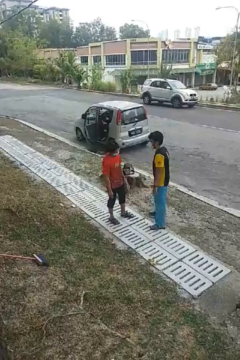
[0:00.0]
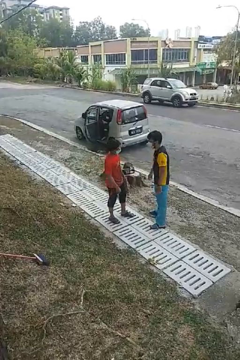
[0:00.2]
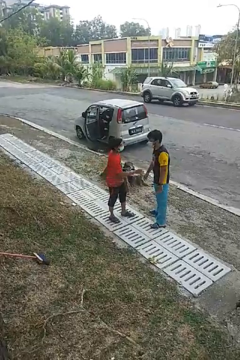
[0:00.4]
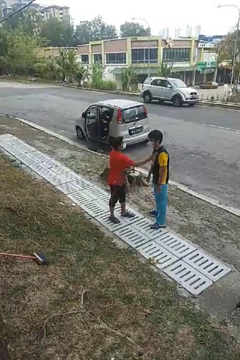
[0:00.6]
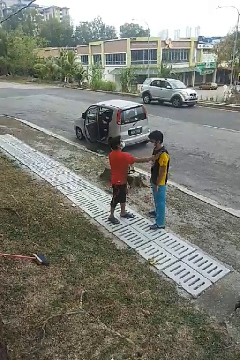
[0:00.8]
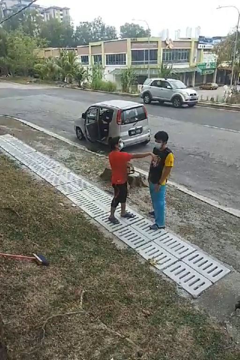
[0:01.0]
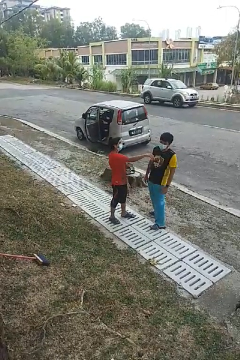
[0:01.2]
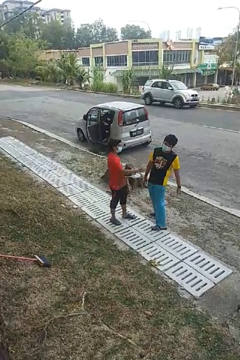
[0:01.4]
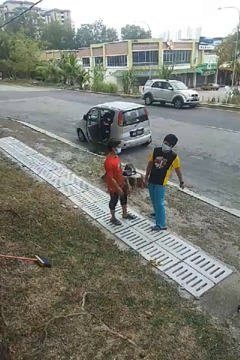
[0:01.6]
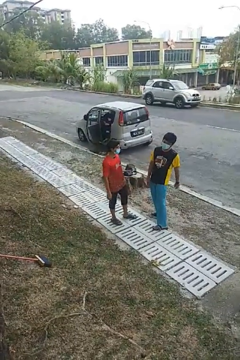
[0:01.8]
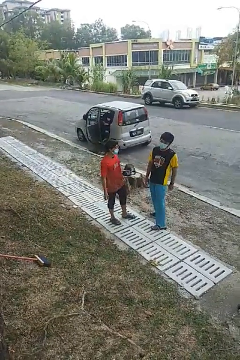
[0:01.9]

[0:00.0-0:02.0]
person shoves person

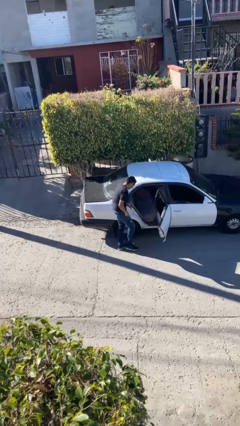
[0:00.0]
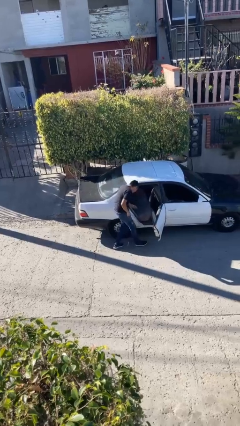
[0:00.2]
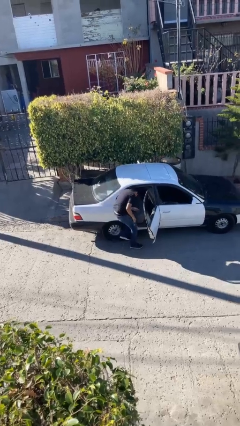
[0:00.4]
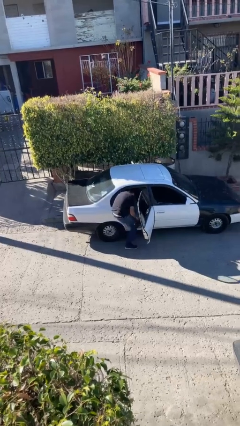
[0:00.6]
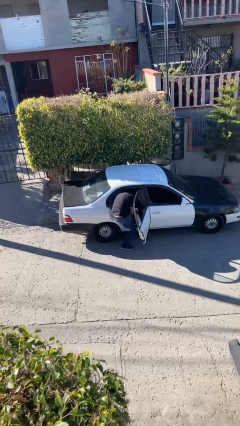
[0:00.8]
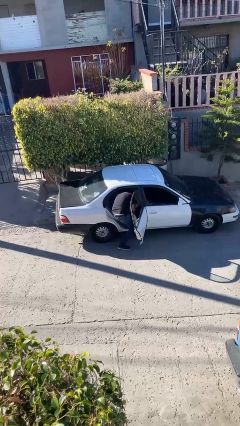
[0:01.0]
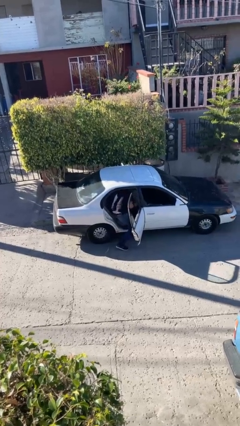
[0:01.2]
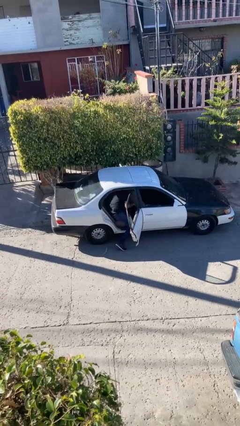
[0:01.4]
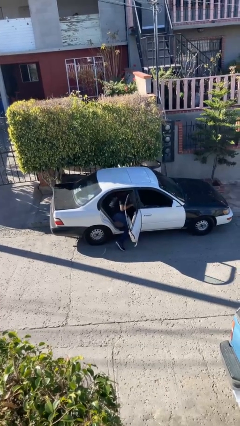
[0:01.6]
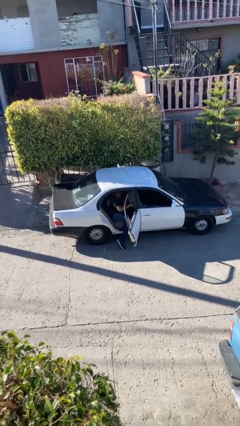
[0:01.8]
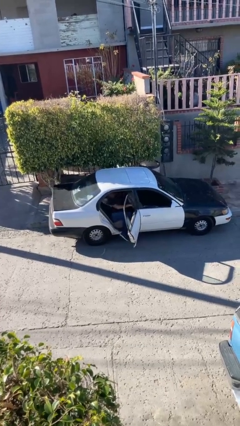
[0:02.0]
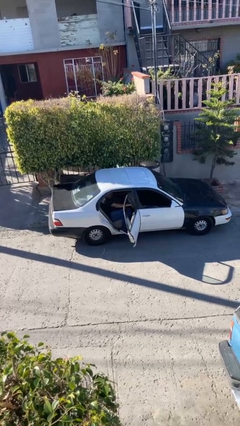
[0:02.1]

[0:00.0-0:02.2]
person enters car

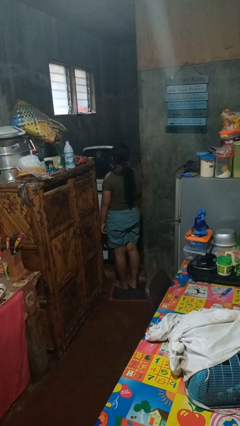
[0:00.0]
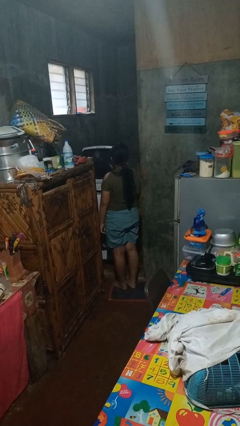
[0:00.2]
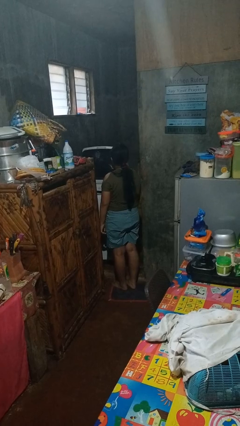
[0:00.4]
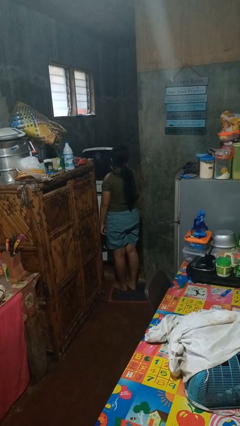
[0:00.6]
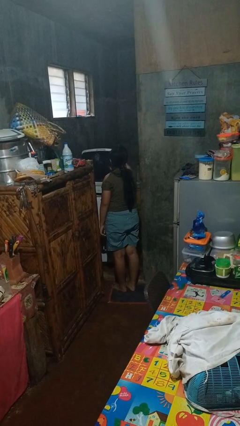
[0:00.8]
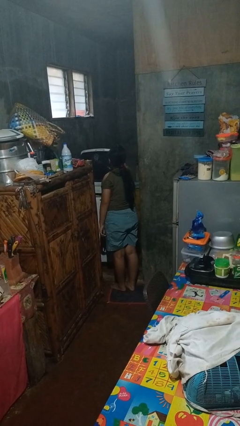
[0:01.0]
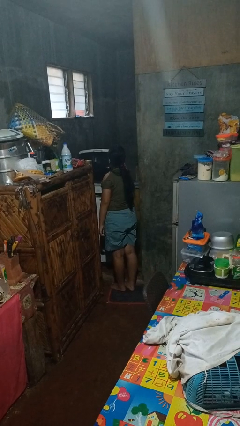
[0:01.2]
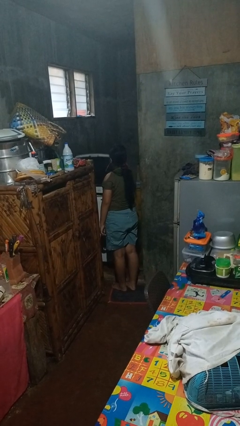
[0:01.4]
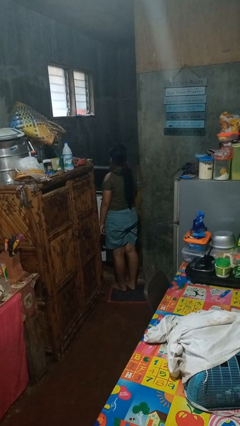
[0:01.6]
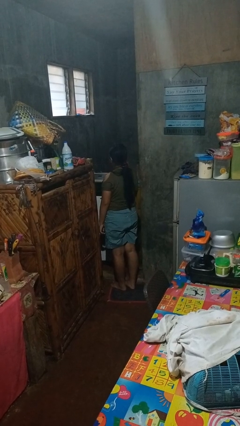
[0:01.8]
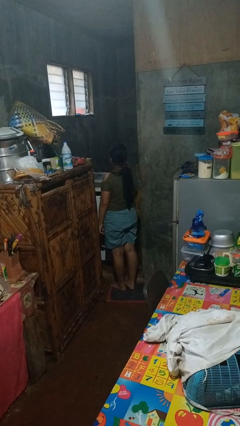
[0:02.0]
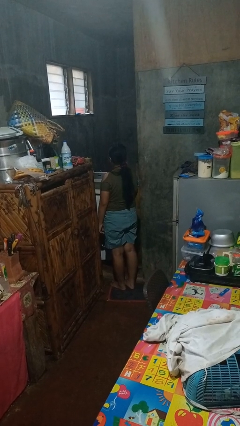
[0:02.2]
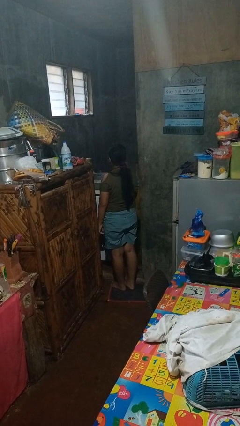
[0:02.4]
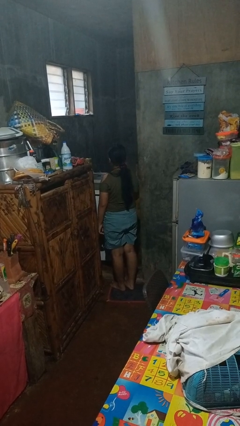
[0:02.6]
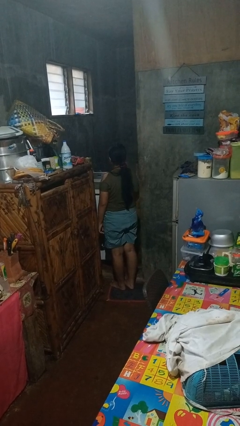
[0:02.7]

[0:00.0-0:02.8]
person closes clothes washer

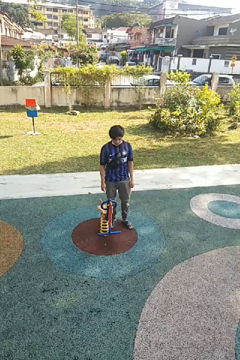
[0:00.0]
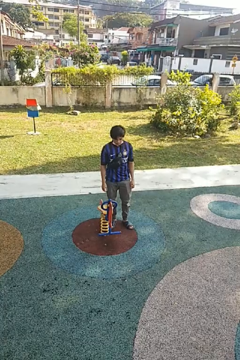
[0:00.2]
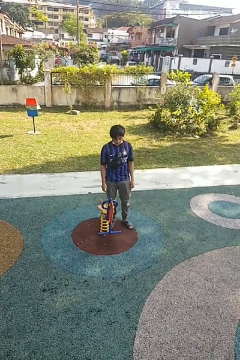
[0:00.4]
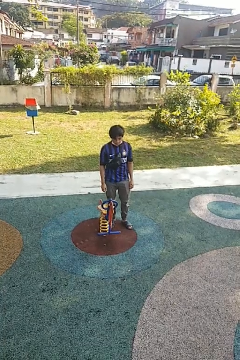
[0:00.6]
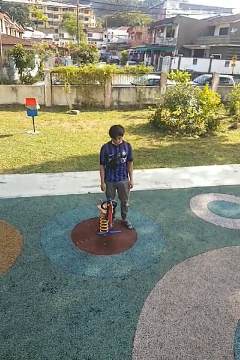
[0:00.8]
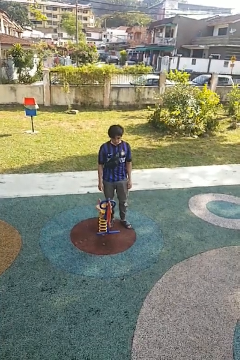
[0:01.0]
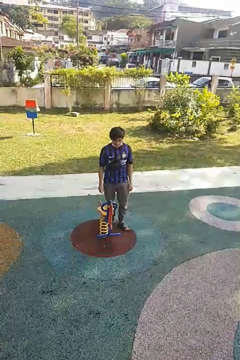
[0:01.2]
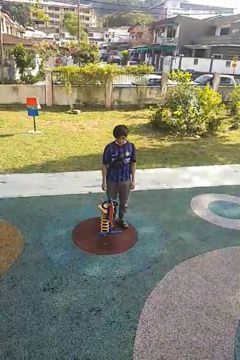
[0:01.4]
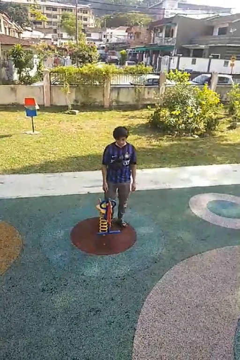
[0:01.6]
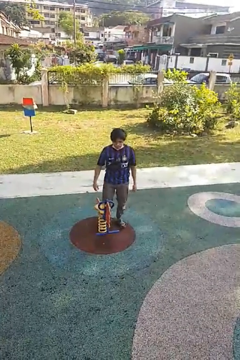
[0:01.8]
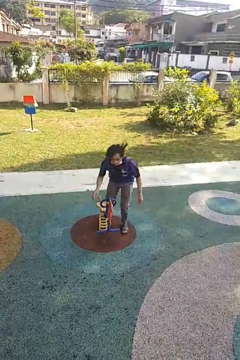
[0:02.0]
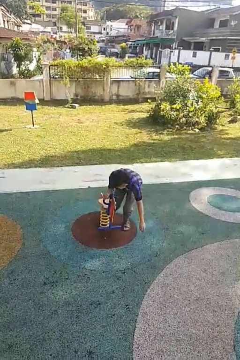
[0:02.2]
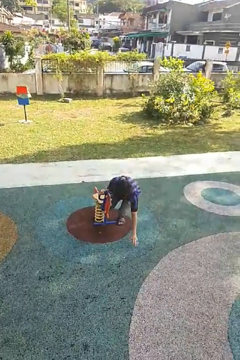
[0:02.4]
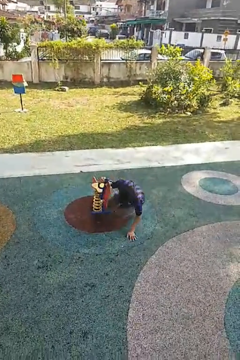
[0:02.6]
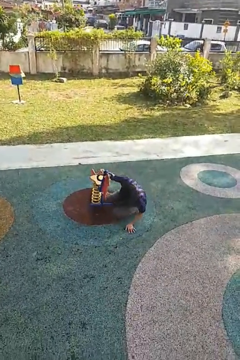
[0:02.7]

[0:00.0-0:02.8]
person trips on object on floor

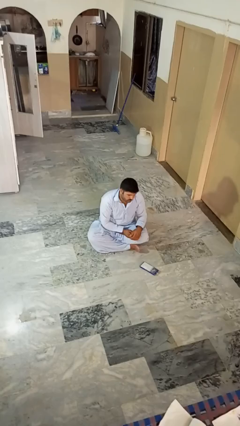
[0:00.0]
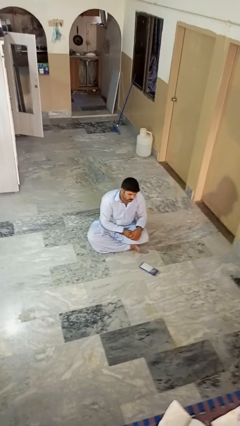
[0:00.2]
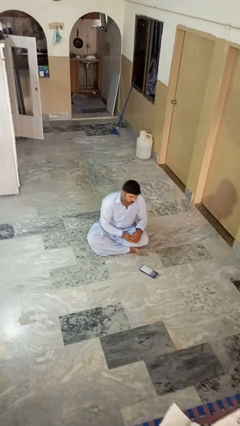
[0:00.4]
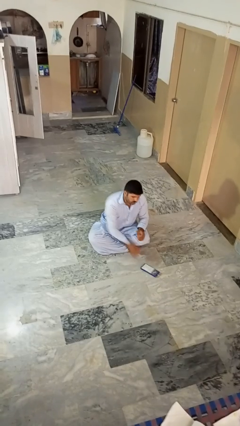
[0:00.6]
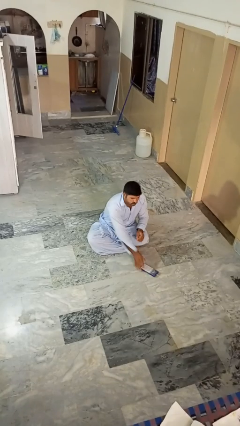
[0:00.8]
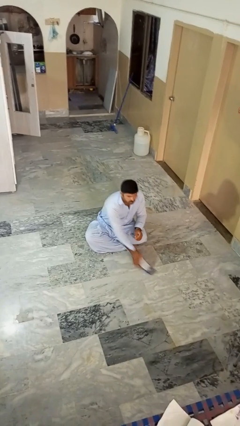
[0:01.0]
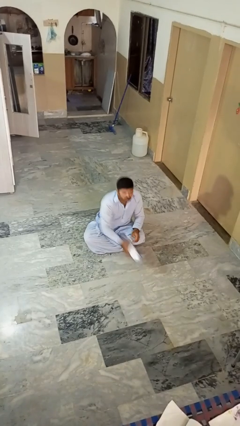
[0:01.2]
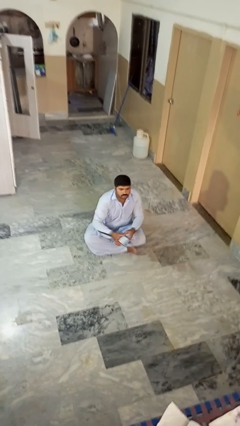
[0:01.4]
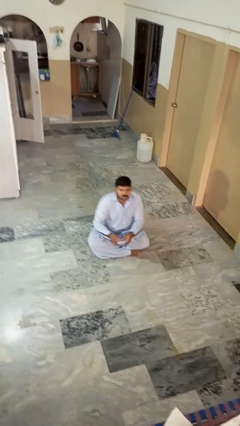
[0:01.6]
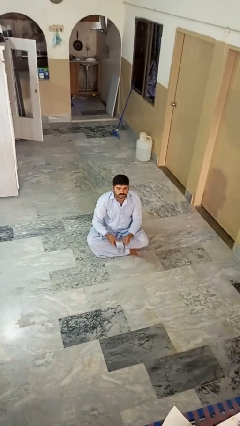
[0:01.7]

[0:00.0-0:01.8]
person picks up object from floor

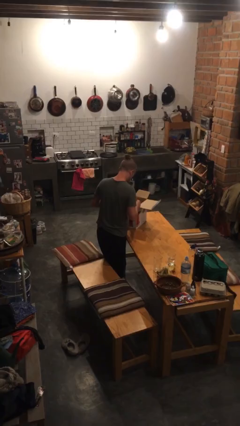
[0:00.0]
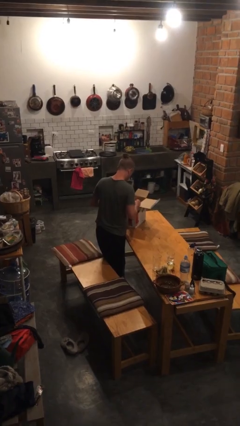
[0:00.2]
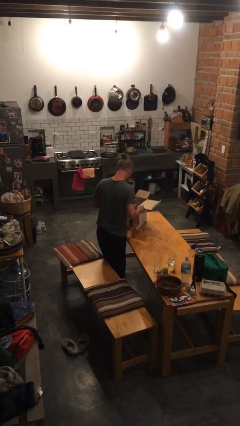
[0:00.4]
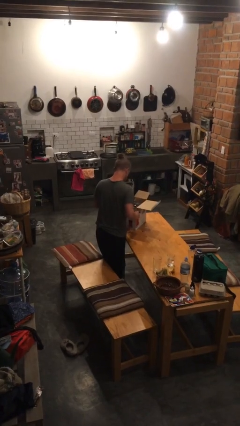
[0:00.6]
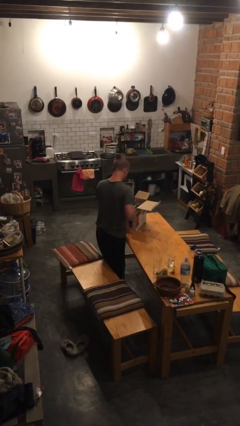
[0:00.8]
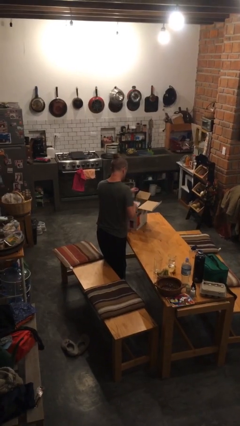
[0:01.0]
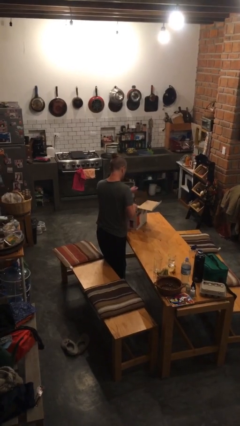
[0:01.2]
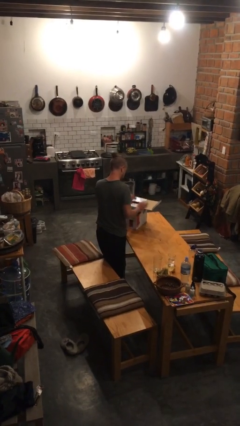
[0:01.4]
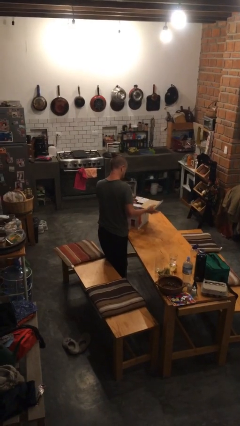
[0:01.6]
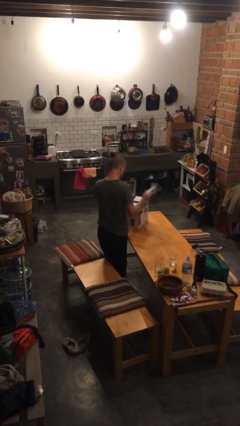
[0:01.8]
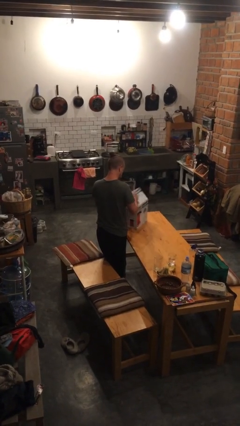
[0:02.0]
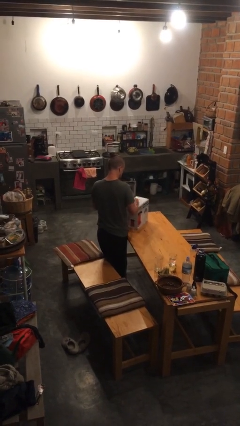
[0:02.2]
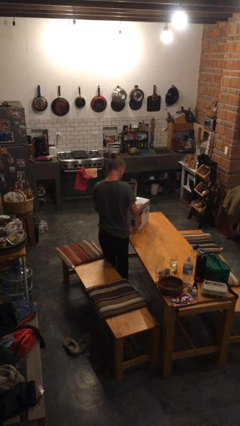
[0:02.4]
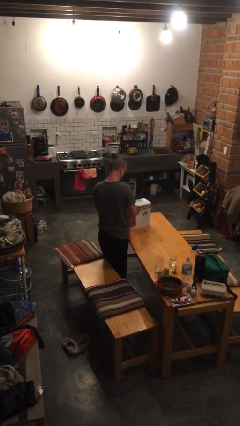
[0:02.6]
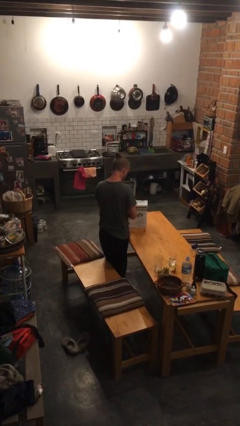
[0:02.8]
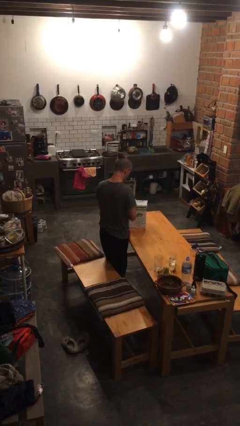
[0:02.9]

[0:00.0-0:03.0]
person closes box

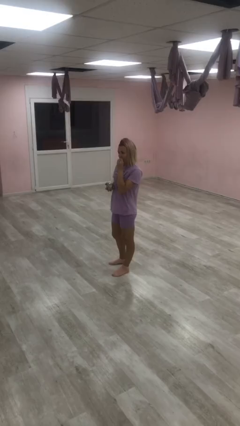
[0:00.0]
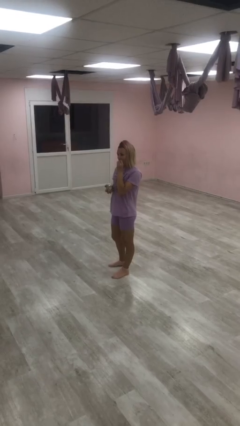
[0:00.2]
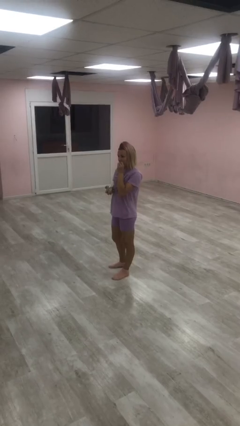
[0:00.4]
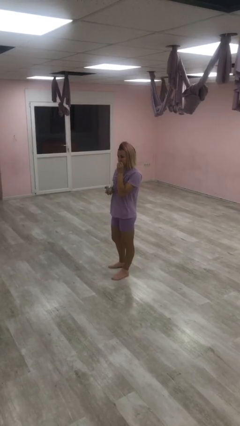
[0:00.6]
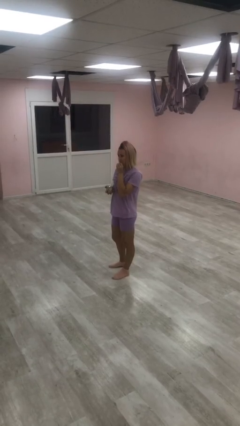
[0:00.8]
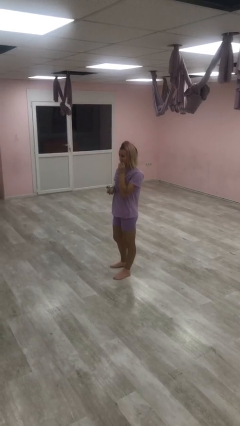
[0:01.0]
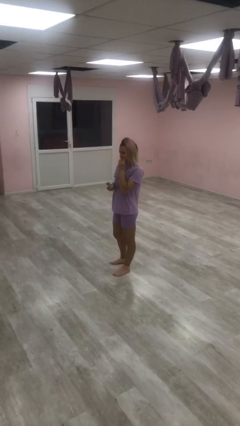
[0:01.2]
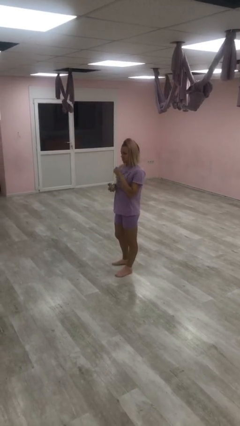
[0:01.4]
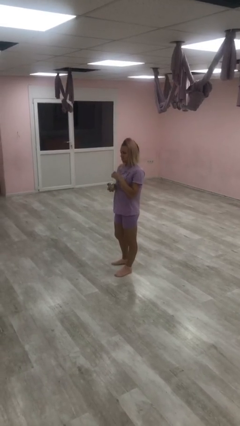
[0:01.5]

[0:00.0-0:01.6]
person eats snack from bag

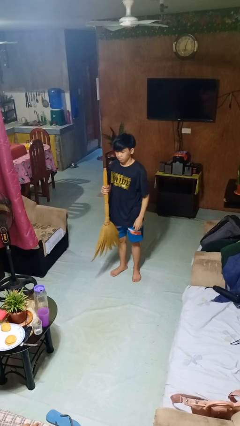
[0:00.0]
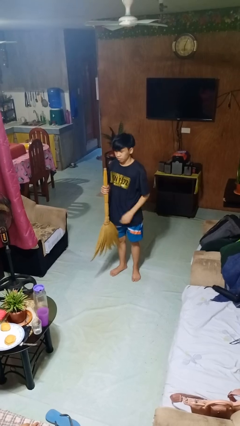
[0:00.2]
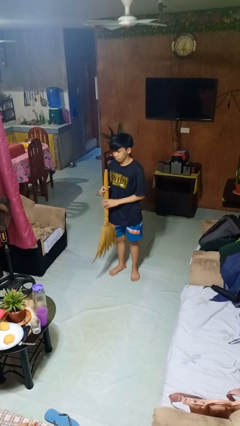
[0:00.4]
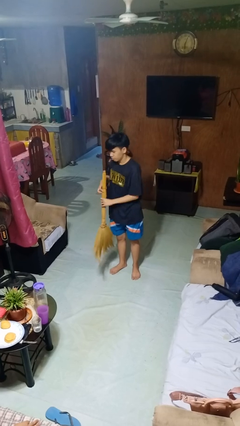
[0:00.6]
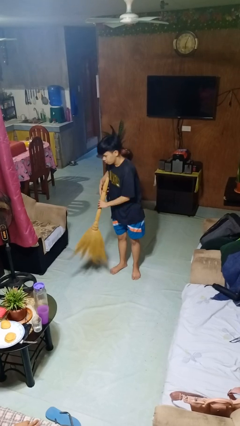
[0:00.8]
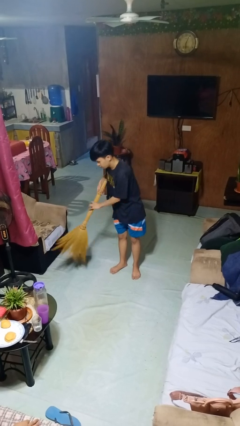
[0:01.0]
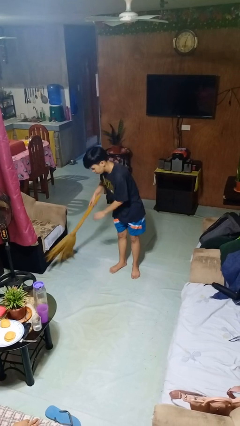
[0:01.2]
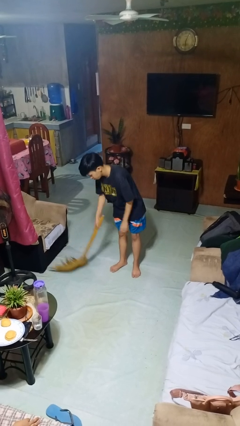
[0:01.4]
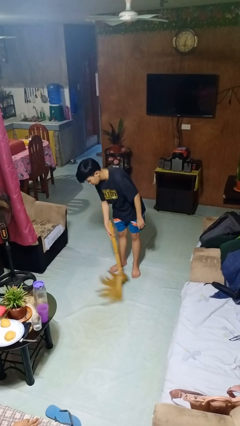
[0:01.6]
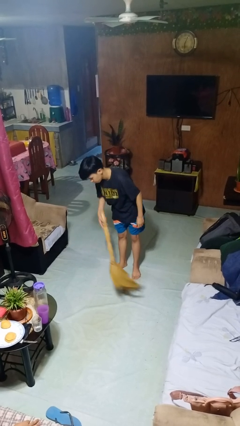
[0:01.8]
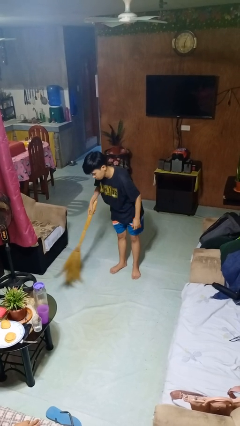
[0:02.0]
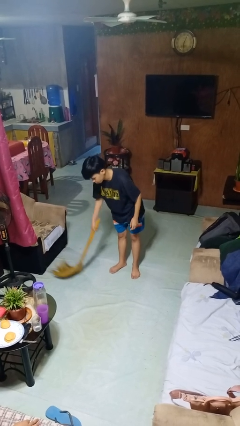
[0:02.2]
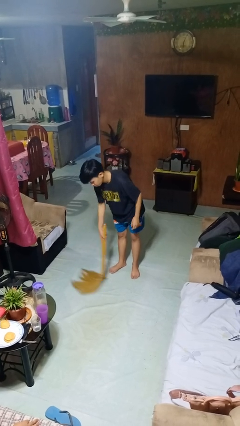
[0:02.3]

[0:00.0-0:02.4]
person sweeps floor
